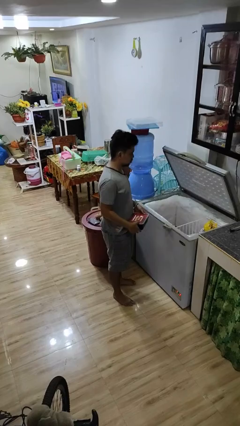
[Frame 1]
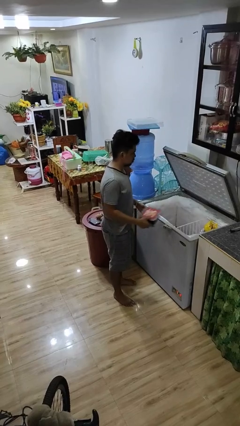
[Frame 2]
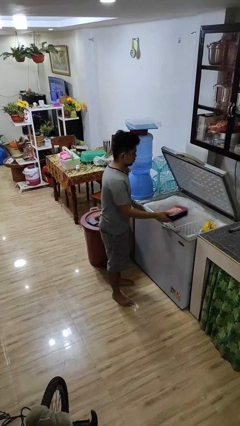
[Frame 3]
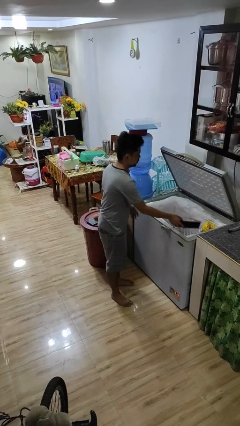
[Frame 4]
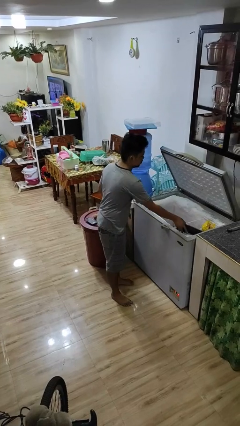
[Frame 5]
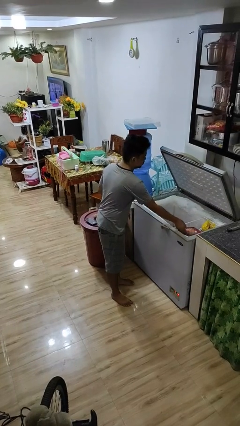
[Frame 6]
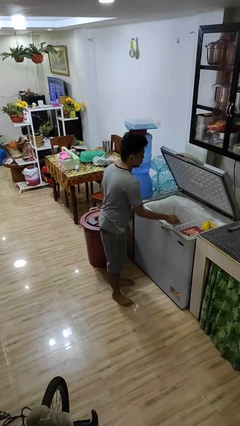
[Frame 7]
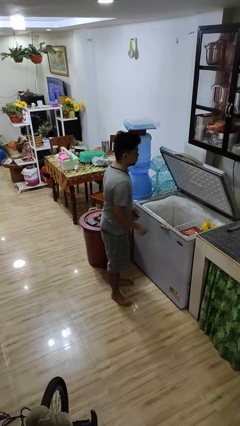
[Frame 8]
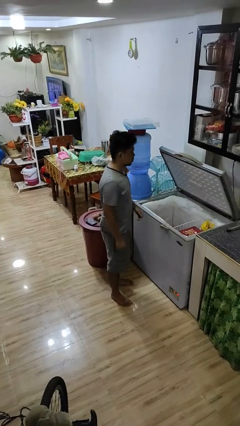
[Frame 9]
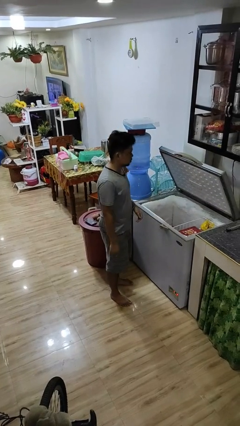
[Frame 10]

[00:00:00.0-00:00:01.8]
person puts object into refrigerator

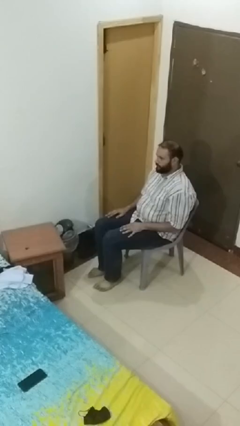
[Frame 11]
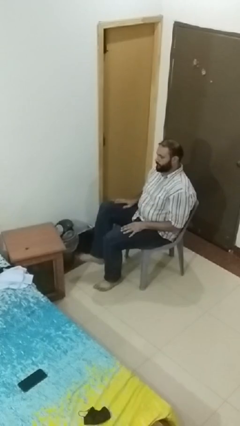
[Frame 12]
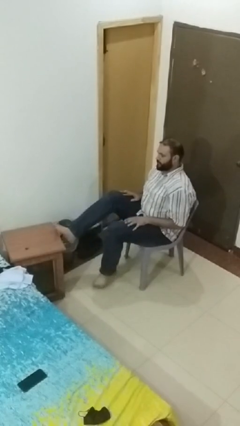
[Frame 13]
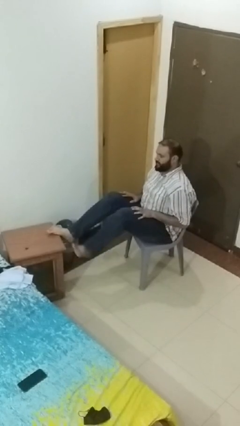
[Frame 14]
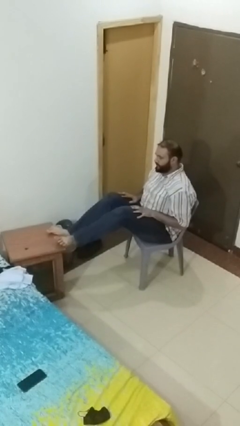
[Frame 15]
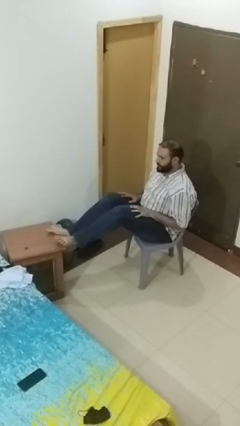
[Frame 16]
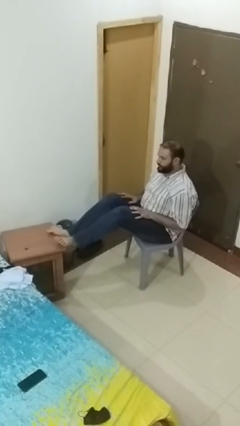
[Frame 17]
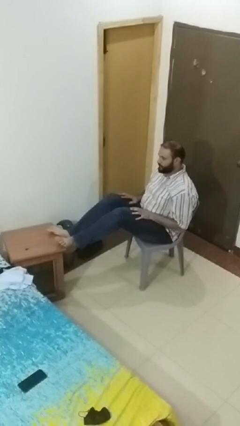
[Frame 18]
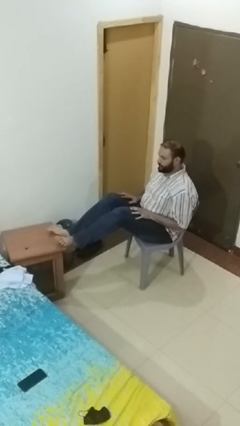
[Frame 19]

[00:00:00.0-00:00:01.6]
person puts feet up

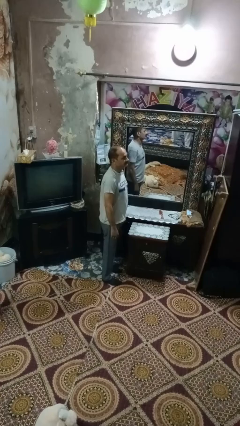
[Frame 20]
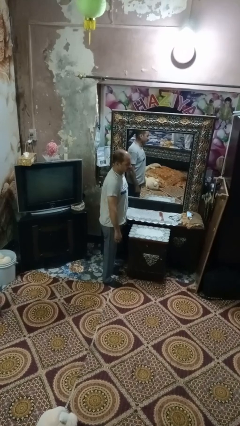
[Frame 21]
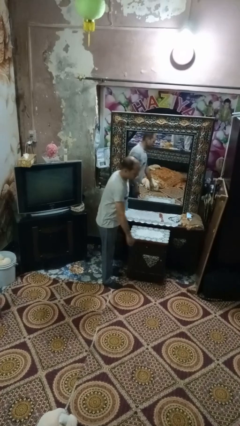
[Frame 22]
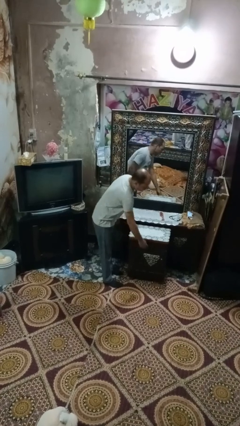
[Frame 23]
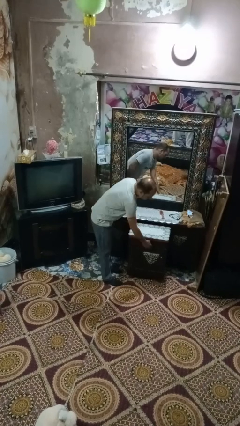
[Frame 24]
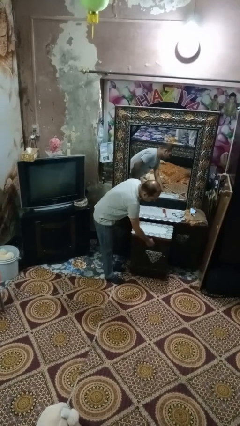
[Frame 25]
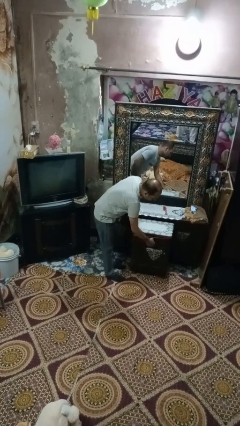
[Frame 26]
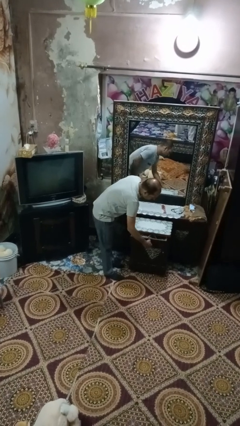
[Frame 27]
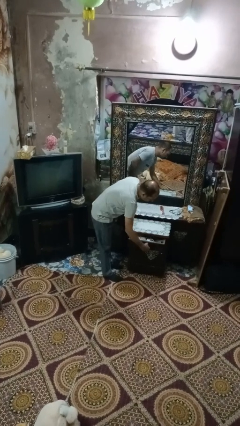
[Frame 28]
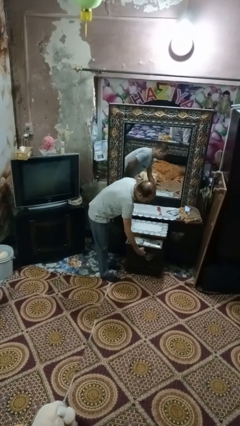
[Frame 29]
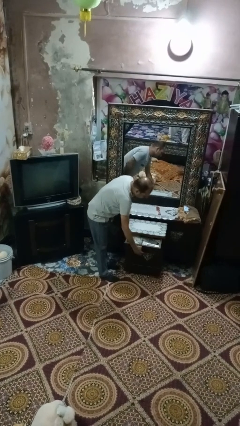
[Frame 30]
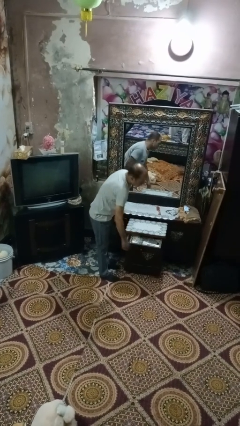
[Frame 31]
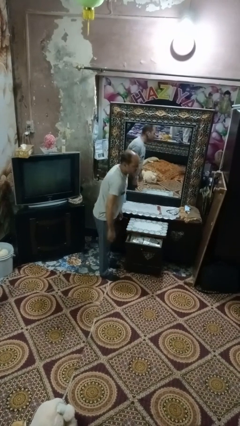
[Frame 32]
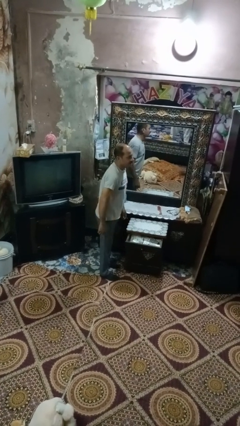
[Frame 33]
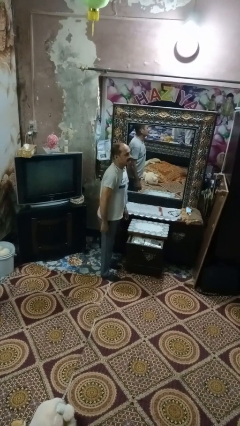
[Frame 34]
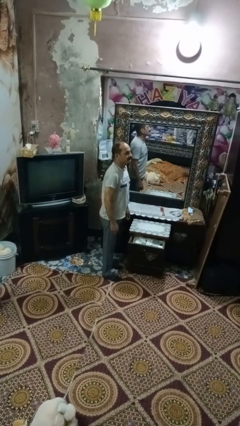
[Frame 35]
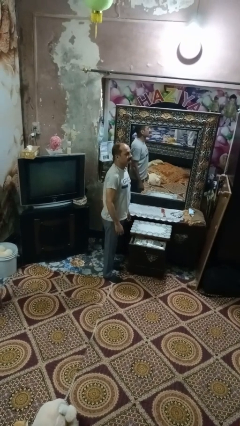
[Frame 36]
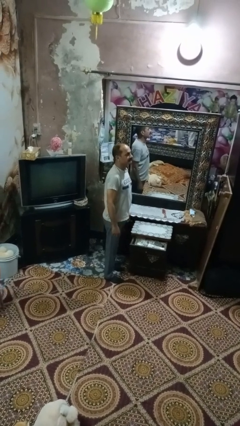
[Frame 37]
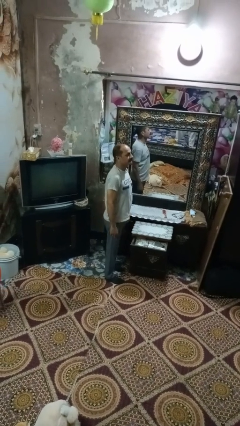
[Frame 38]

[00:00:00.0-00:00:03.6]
person opens dresser drawer

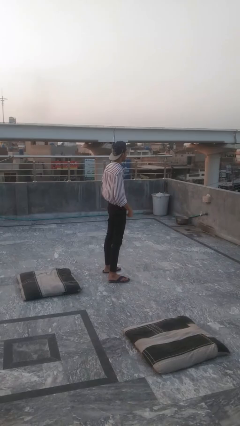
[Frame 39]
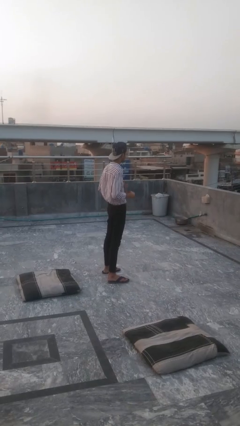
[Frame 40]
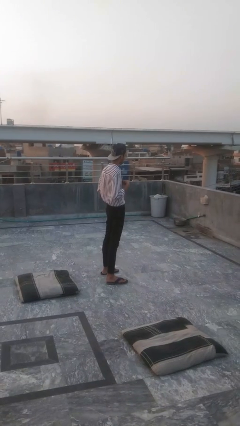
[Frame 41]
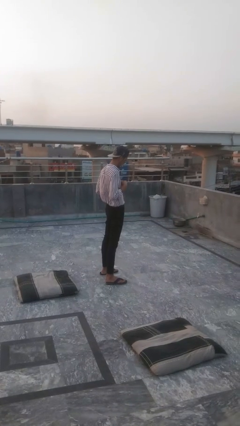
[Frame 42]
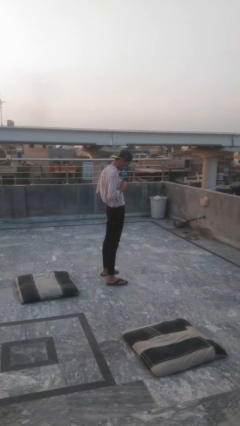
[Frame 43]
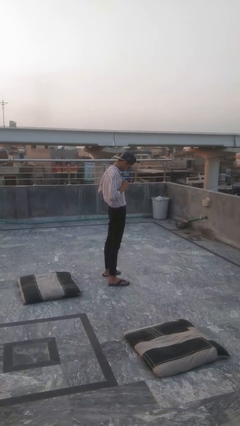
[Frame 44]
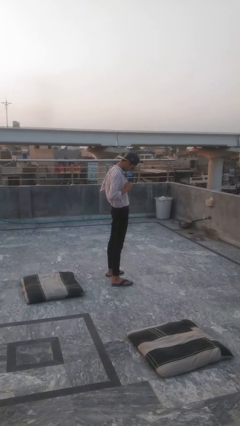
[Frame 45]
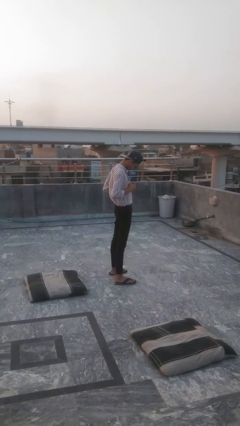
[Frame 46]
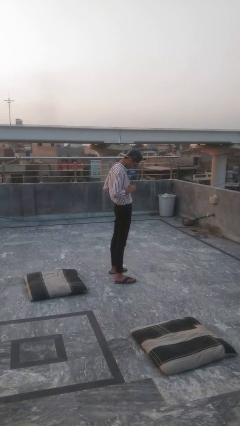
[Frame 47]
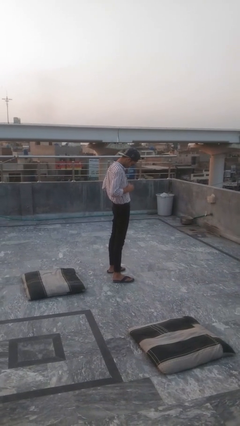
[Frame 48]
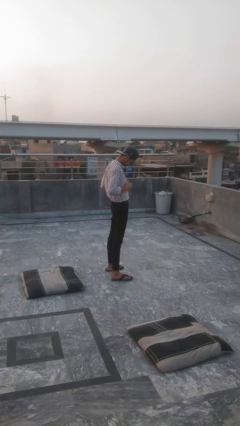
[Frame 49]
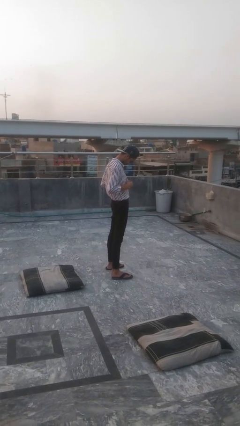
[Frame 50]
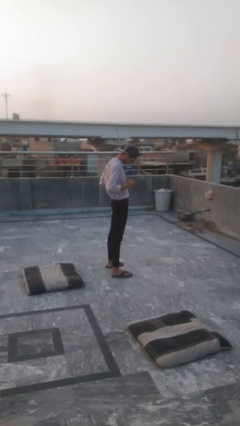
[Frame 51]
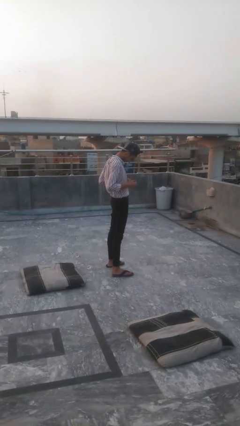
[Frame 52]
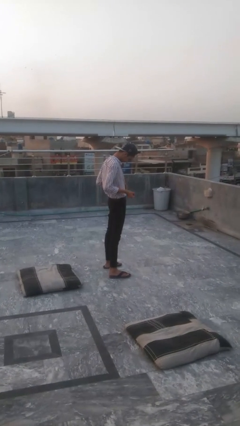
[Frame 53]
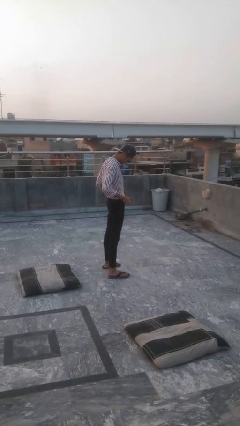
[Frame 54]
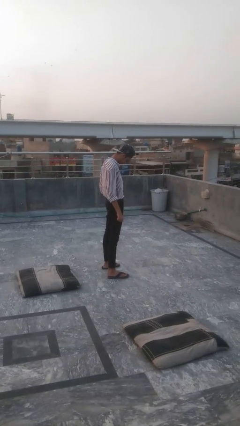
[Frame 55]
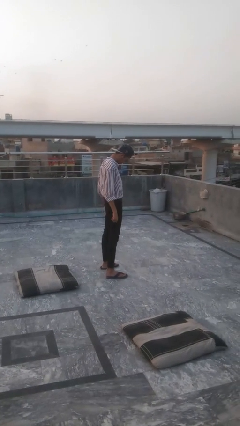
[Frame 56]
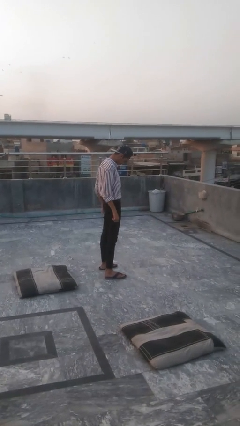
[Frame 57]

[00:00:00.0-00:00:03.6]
person unbuttons shirt

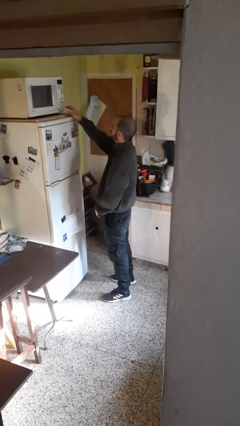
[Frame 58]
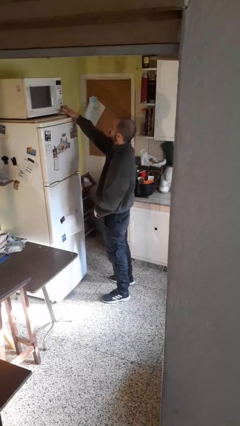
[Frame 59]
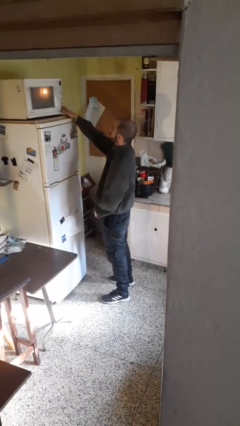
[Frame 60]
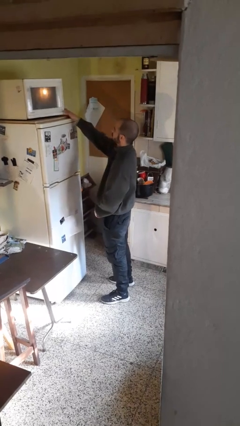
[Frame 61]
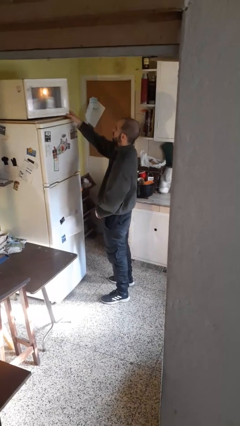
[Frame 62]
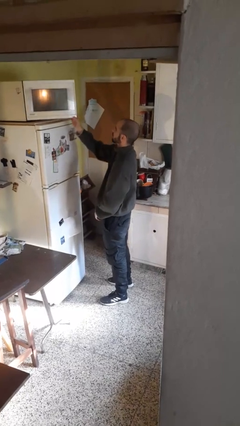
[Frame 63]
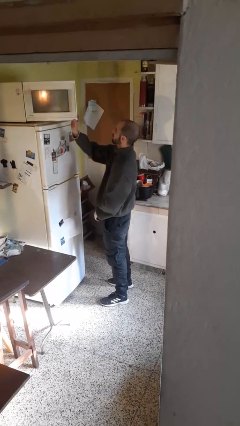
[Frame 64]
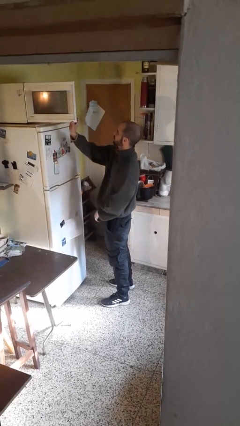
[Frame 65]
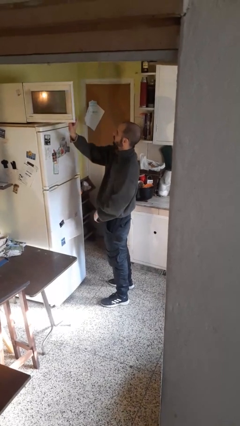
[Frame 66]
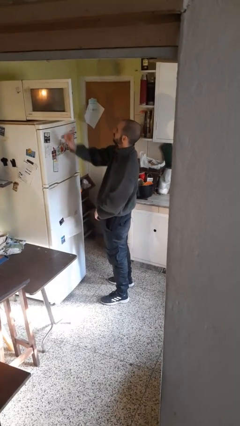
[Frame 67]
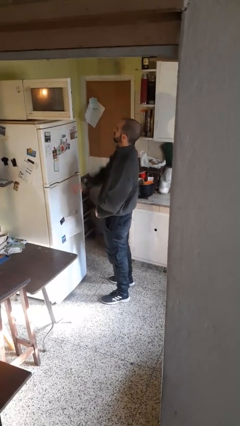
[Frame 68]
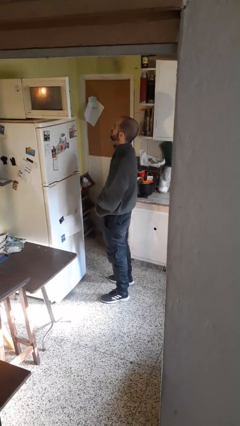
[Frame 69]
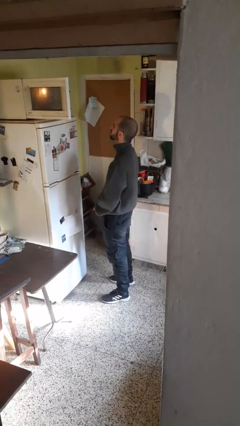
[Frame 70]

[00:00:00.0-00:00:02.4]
person opens microwave

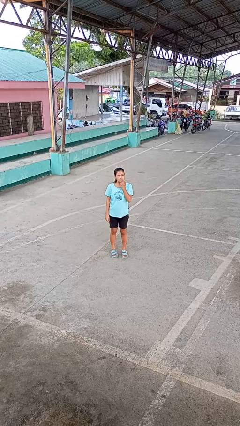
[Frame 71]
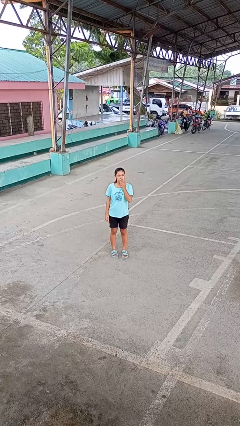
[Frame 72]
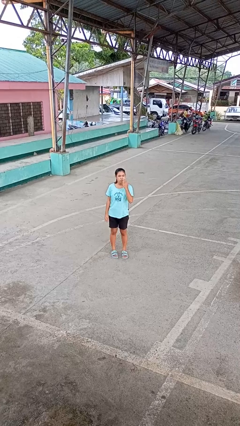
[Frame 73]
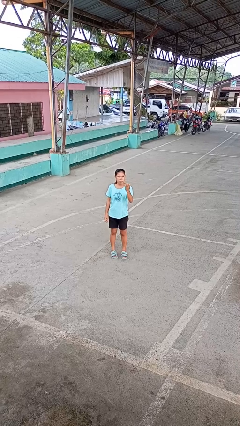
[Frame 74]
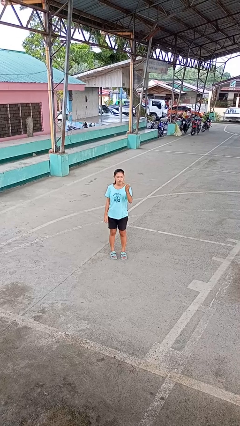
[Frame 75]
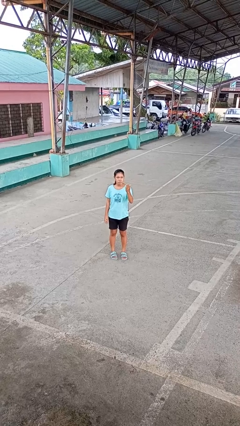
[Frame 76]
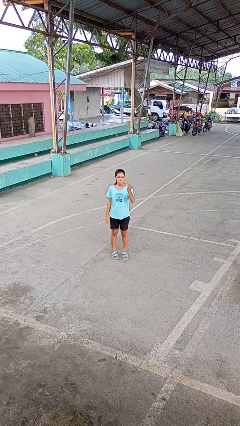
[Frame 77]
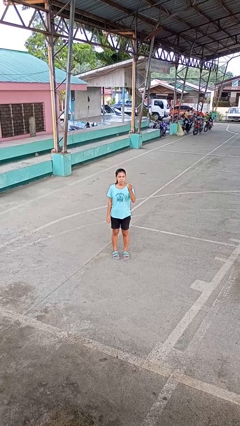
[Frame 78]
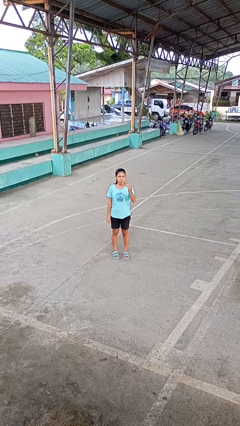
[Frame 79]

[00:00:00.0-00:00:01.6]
person gestures blow kiss

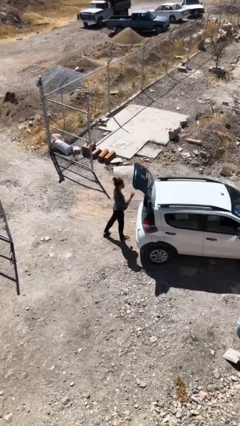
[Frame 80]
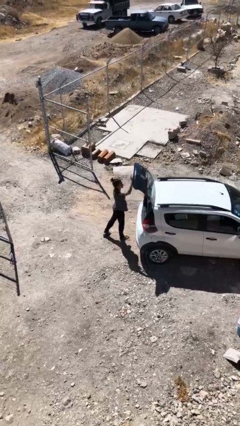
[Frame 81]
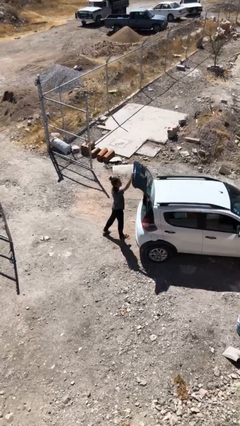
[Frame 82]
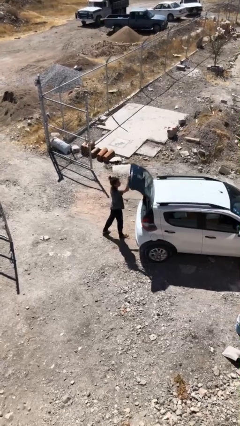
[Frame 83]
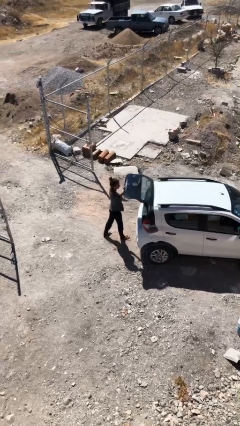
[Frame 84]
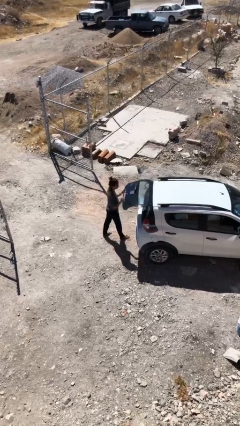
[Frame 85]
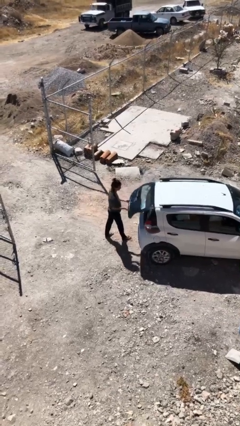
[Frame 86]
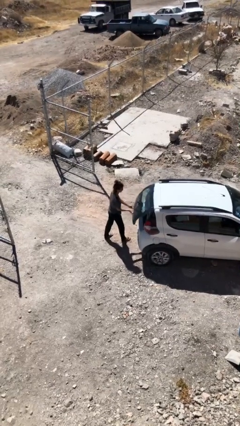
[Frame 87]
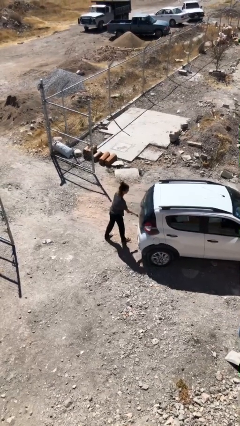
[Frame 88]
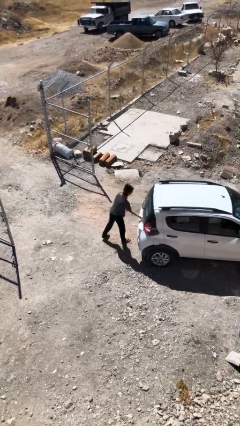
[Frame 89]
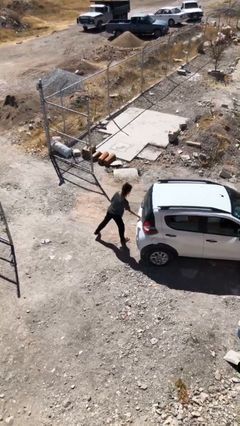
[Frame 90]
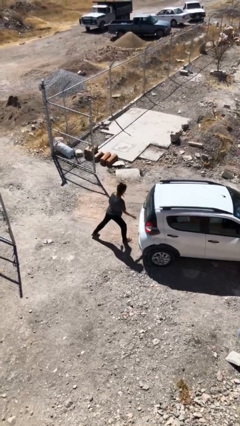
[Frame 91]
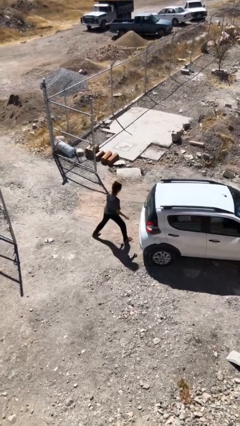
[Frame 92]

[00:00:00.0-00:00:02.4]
person closes car trunk
